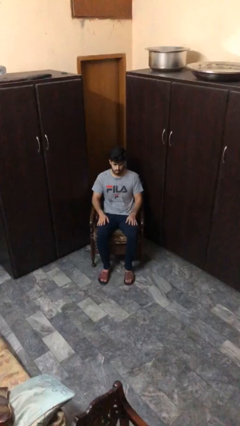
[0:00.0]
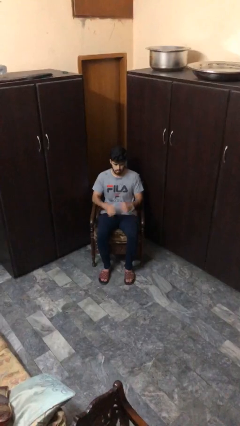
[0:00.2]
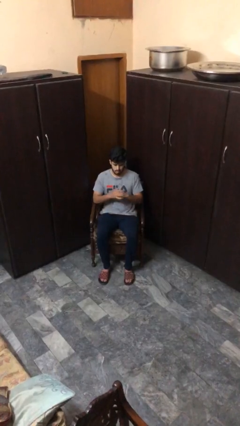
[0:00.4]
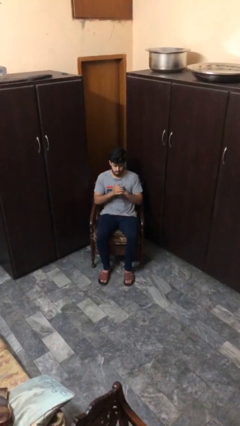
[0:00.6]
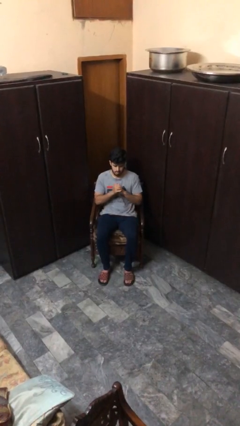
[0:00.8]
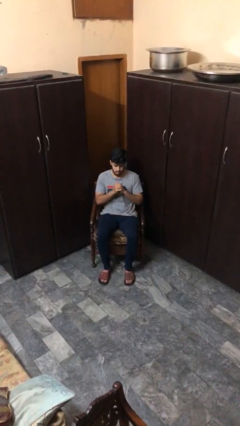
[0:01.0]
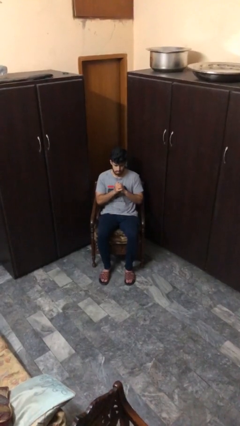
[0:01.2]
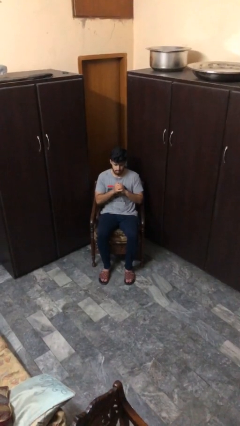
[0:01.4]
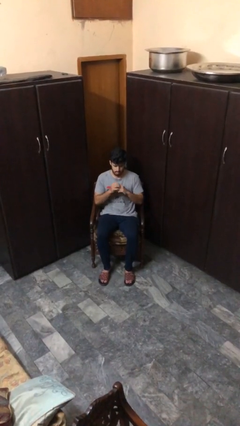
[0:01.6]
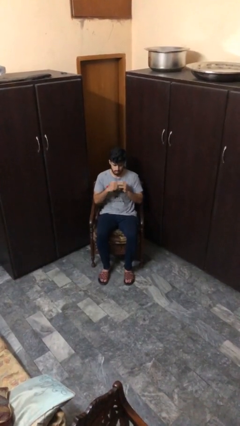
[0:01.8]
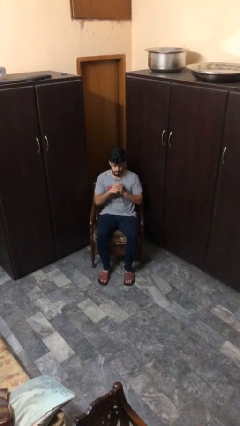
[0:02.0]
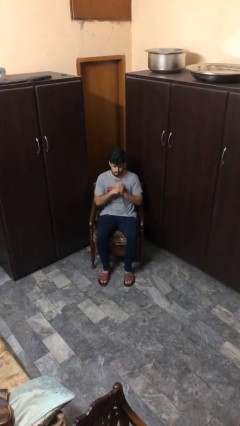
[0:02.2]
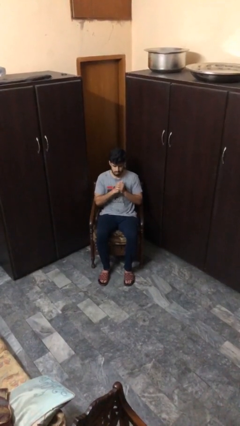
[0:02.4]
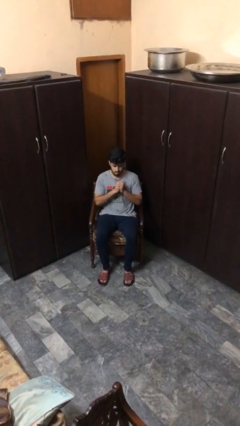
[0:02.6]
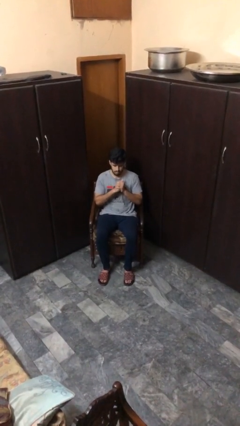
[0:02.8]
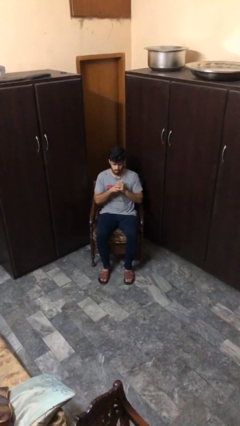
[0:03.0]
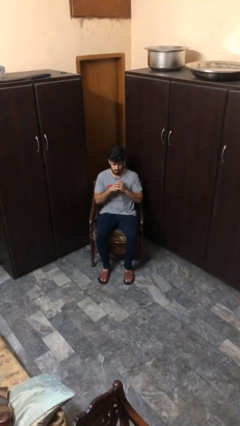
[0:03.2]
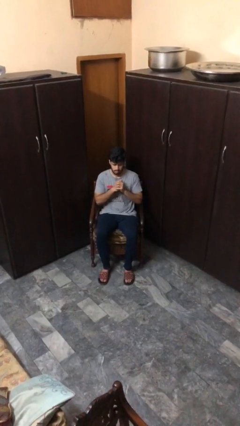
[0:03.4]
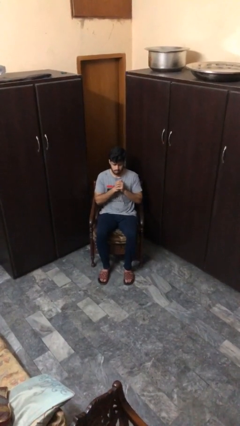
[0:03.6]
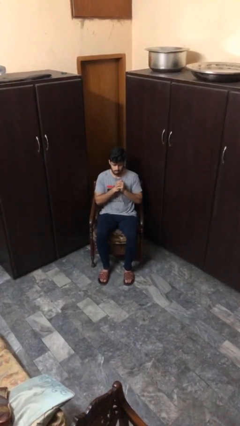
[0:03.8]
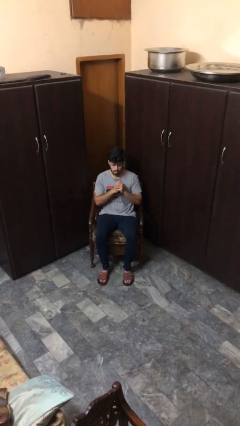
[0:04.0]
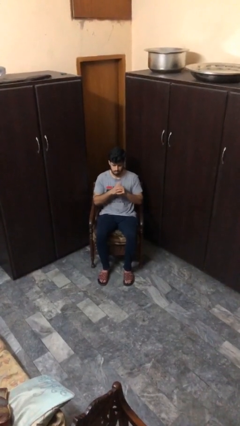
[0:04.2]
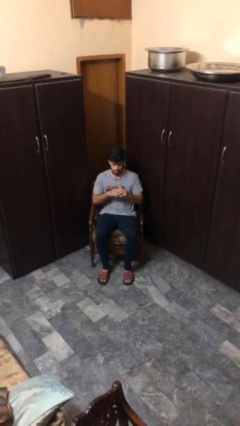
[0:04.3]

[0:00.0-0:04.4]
person cracks knuckles

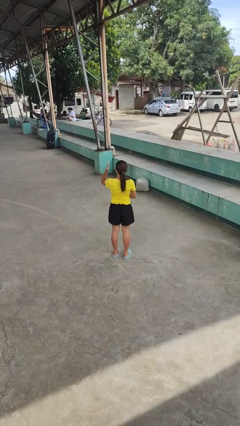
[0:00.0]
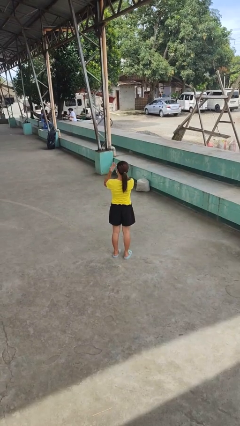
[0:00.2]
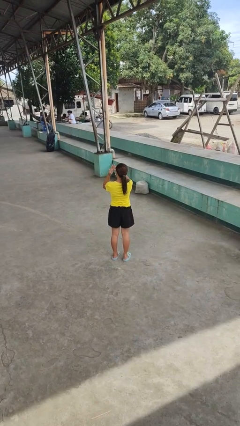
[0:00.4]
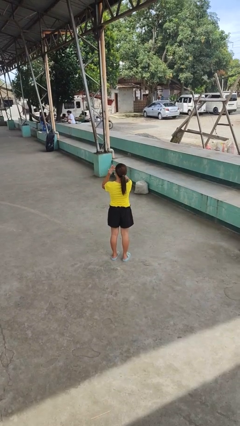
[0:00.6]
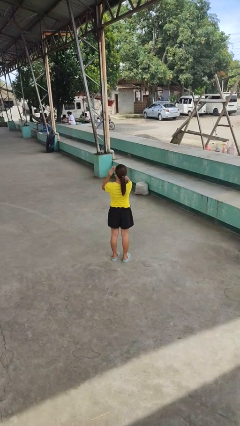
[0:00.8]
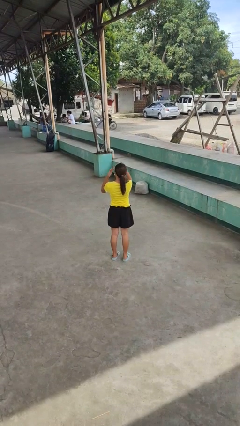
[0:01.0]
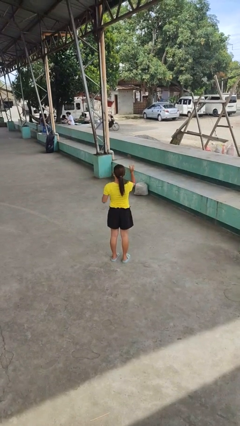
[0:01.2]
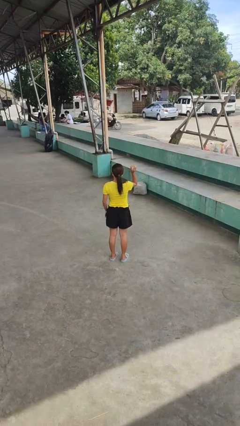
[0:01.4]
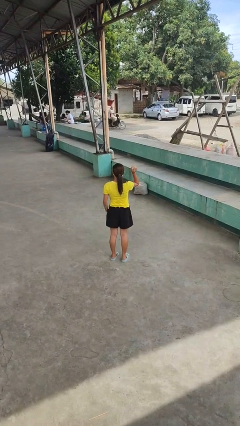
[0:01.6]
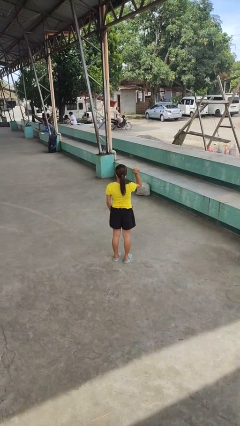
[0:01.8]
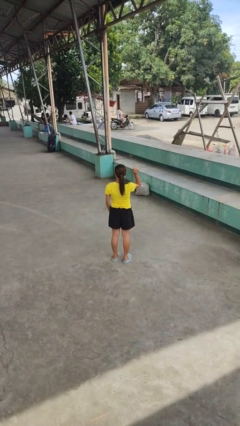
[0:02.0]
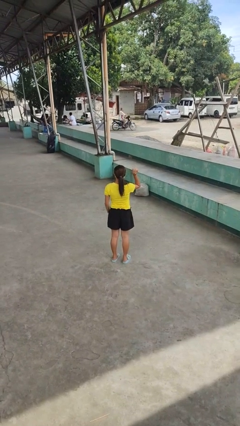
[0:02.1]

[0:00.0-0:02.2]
person takes off ring

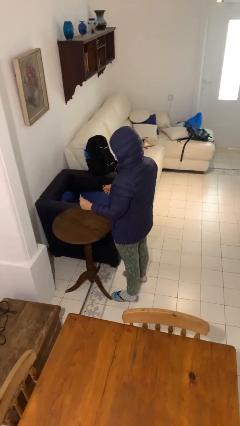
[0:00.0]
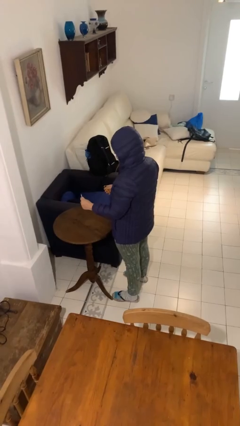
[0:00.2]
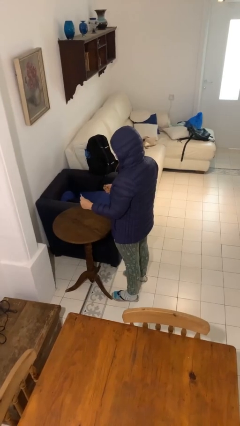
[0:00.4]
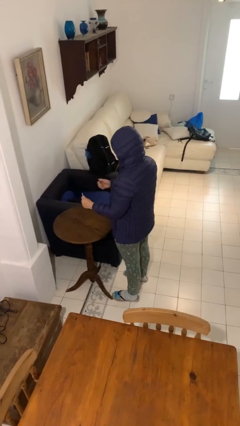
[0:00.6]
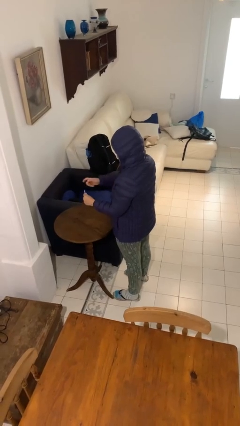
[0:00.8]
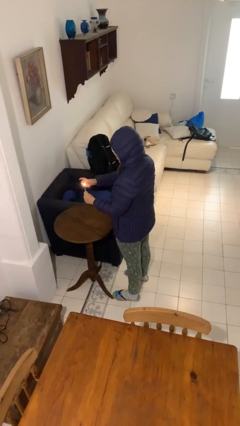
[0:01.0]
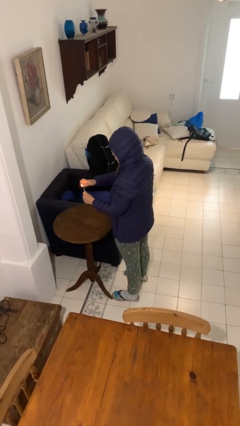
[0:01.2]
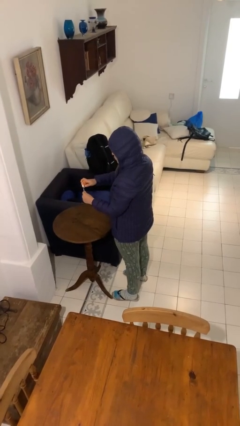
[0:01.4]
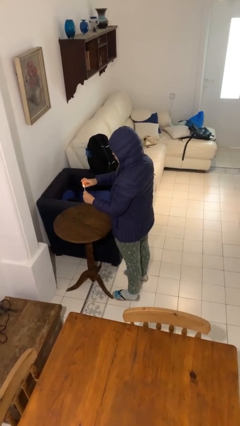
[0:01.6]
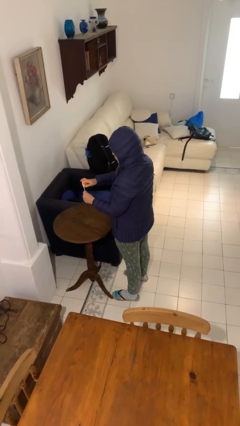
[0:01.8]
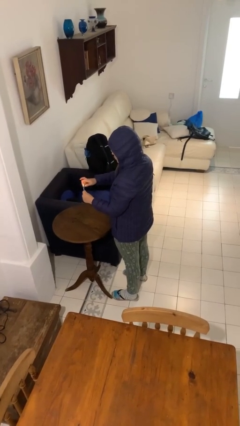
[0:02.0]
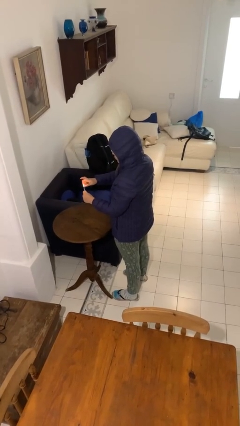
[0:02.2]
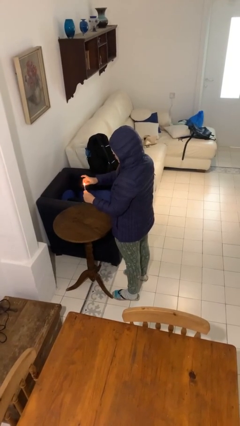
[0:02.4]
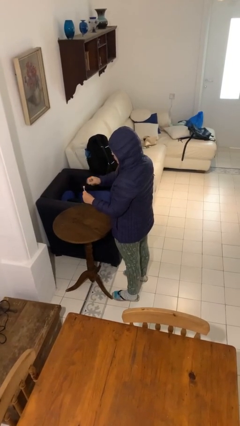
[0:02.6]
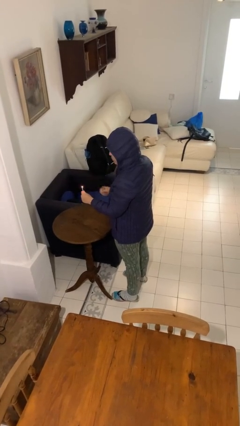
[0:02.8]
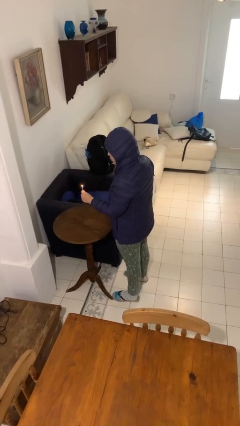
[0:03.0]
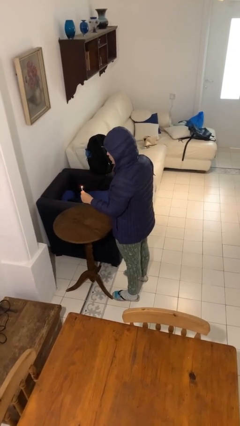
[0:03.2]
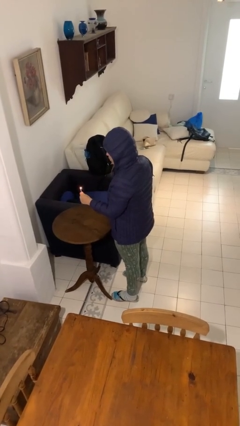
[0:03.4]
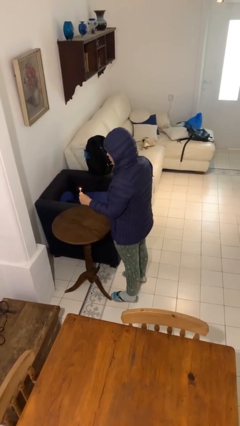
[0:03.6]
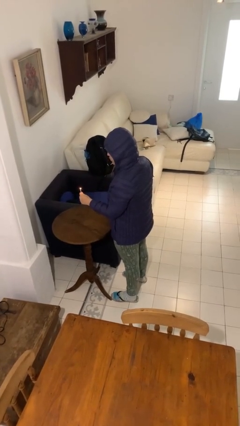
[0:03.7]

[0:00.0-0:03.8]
person lights candle

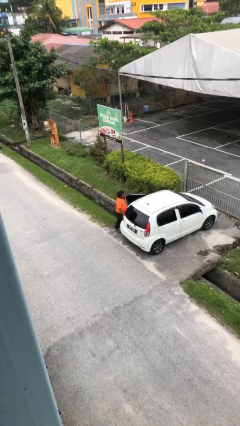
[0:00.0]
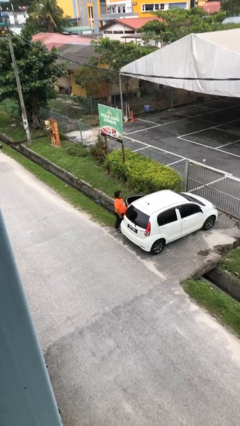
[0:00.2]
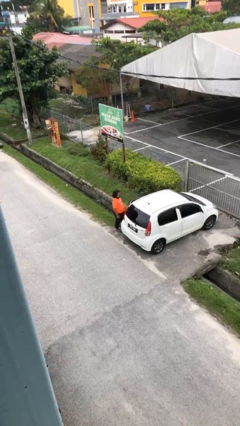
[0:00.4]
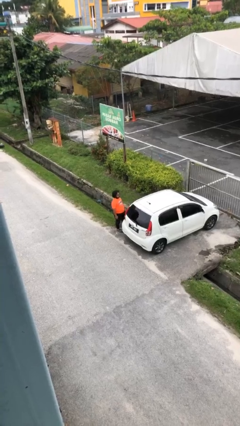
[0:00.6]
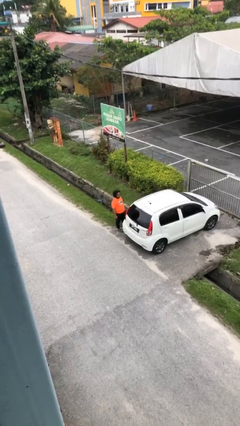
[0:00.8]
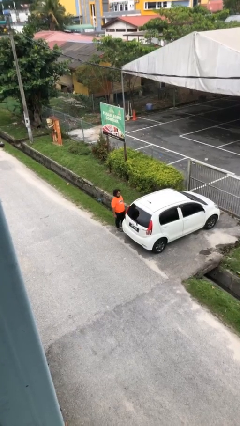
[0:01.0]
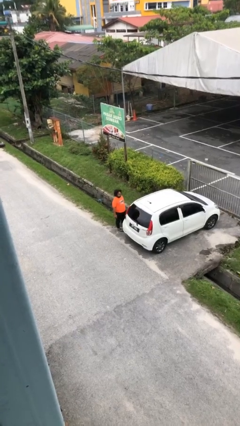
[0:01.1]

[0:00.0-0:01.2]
person closes car door

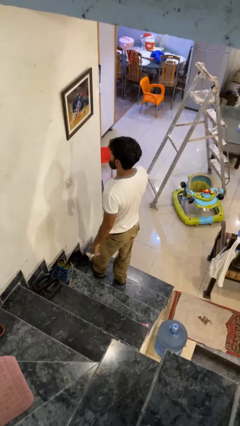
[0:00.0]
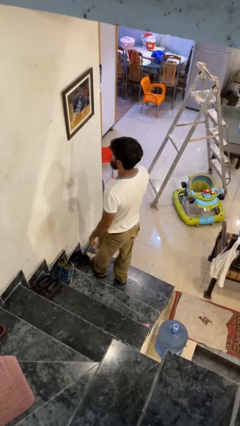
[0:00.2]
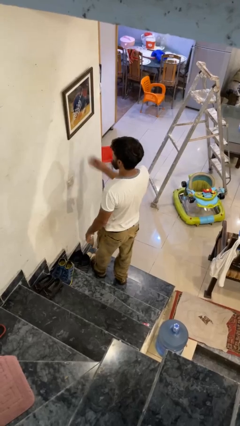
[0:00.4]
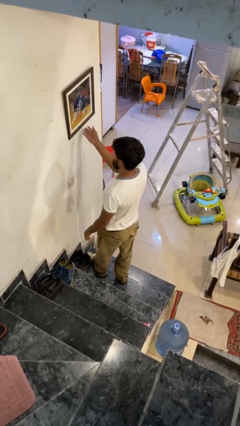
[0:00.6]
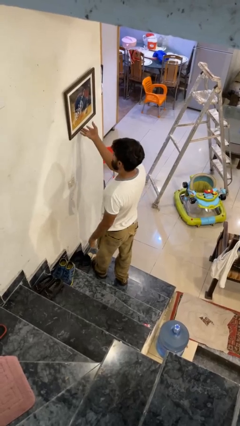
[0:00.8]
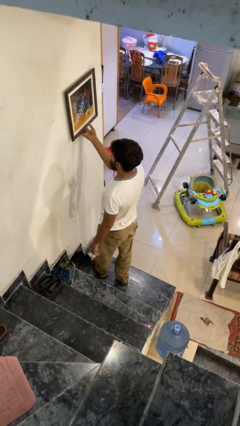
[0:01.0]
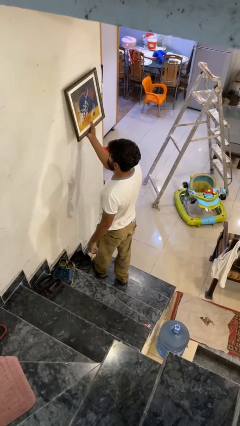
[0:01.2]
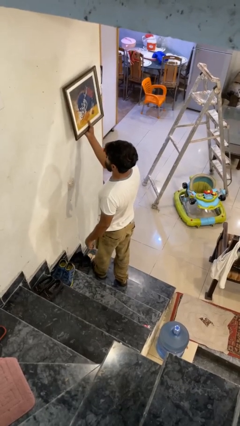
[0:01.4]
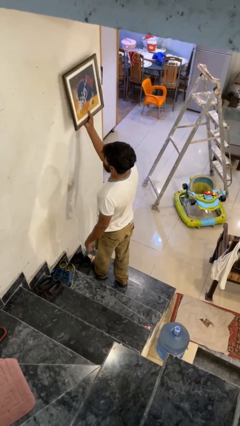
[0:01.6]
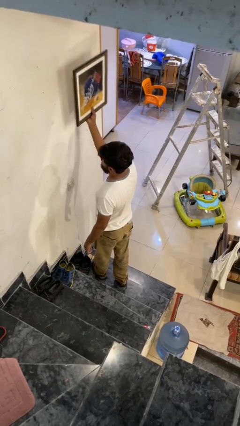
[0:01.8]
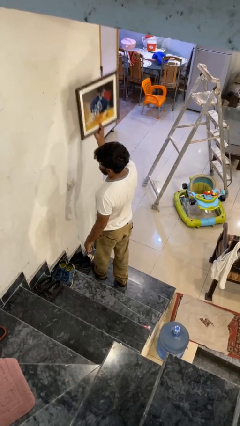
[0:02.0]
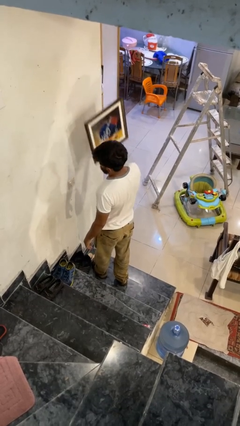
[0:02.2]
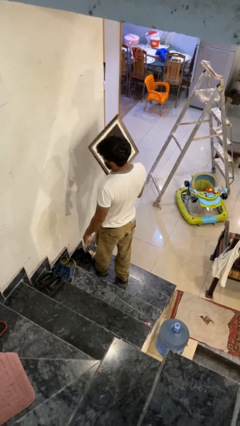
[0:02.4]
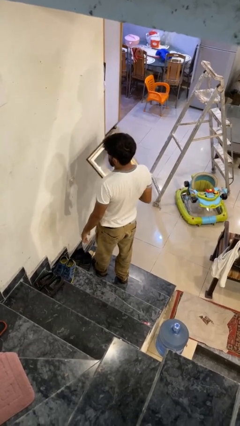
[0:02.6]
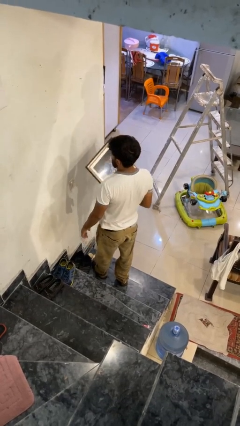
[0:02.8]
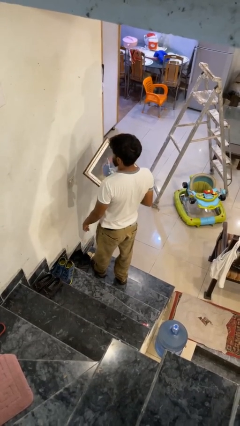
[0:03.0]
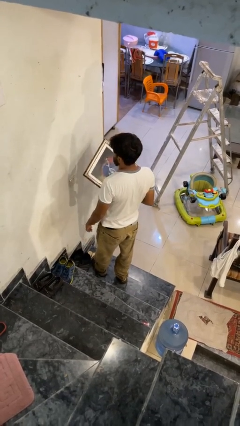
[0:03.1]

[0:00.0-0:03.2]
person takes down picture frame

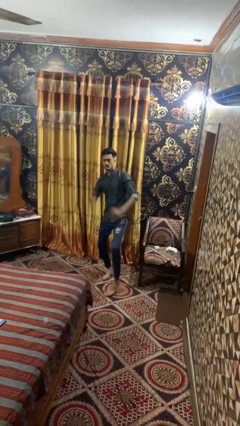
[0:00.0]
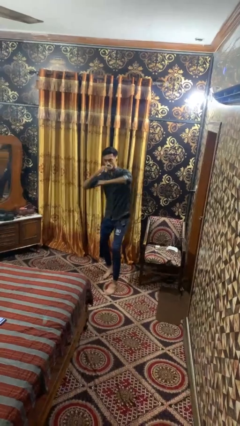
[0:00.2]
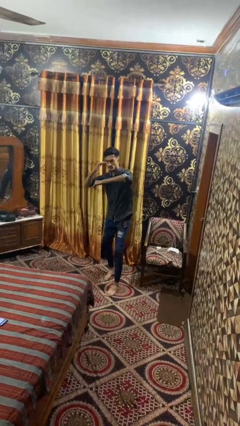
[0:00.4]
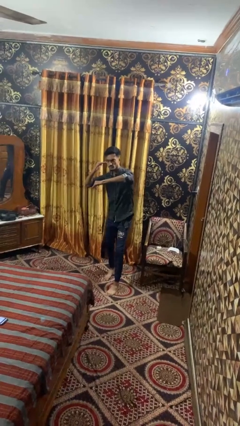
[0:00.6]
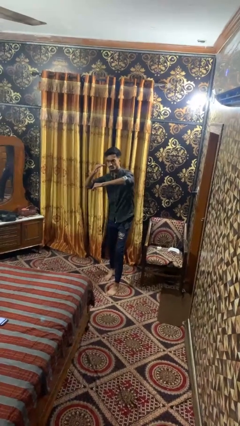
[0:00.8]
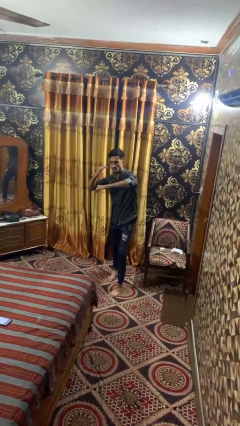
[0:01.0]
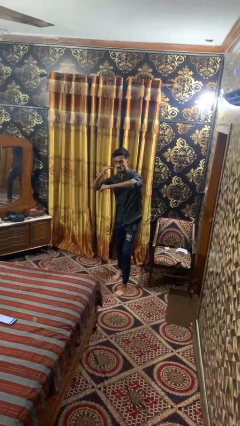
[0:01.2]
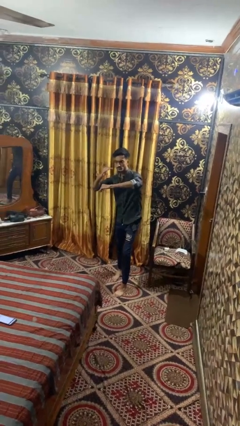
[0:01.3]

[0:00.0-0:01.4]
person karate chop

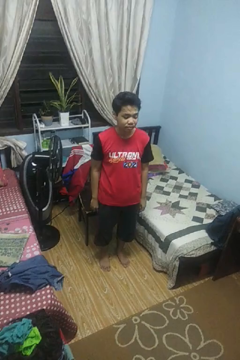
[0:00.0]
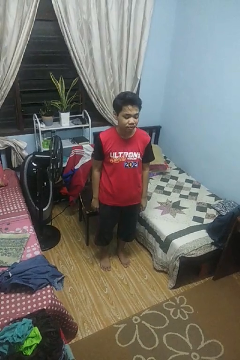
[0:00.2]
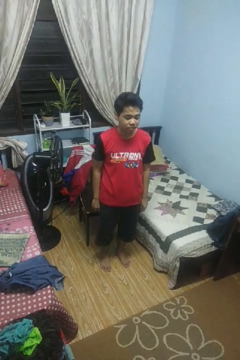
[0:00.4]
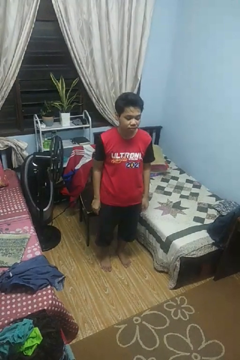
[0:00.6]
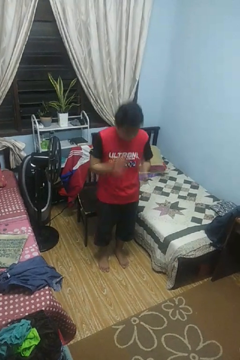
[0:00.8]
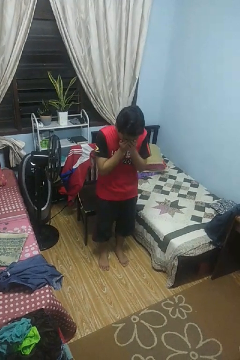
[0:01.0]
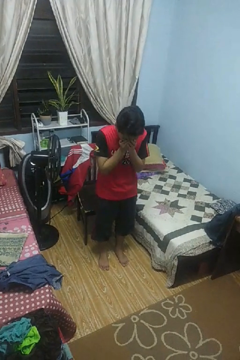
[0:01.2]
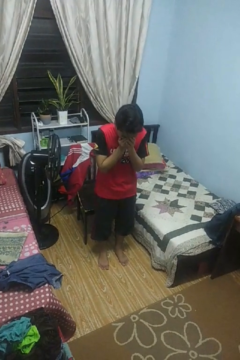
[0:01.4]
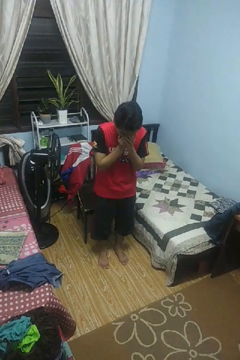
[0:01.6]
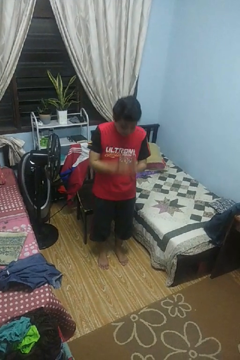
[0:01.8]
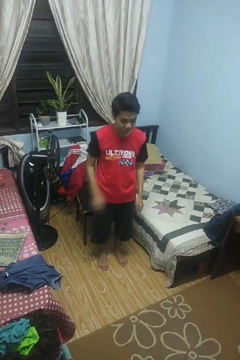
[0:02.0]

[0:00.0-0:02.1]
person sneezes into hand
